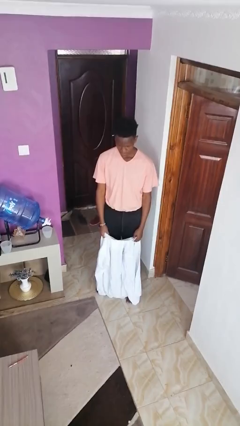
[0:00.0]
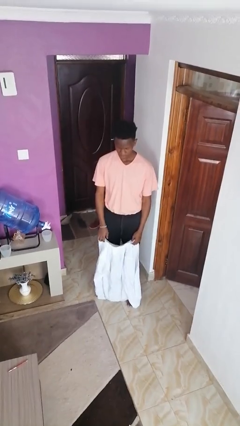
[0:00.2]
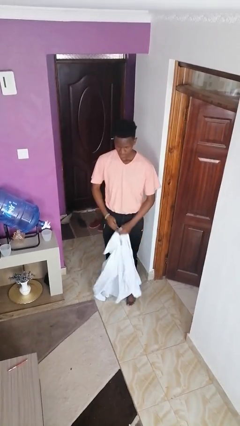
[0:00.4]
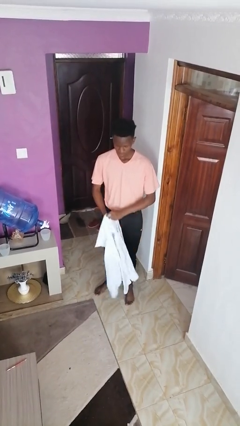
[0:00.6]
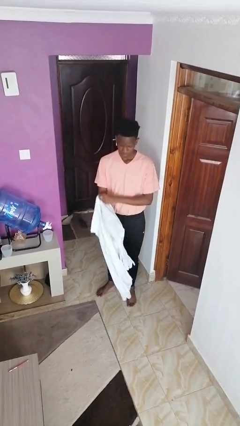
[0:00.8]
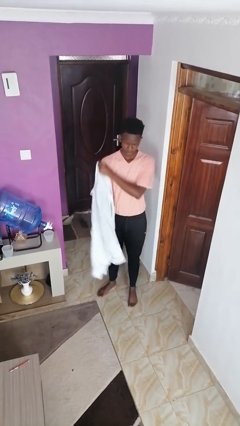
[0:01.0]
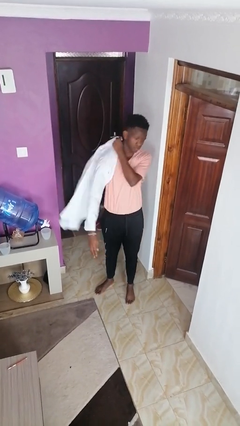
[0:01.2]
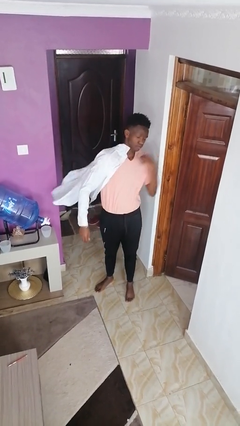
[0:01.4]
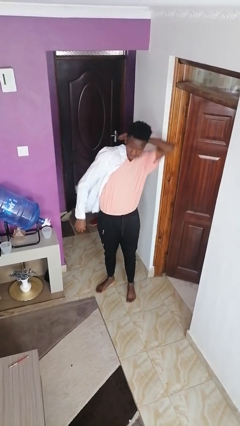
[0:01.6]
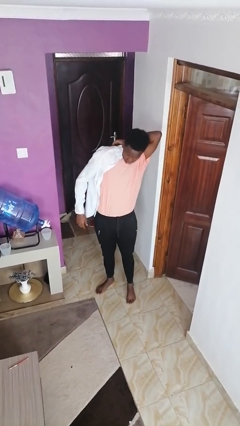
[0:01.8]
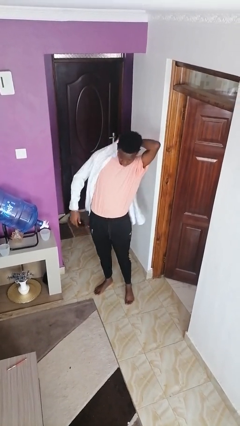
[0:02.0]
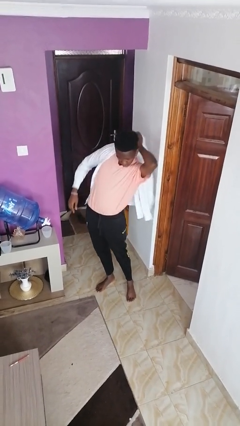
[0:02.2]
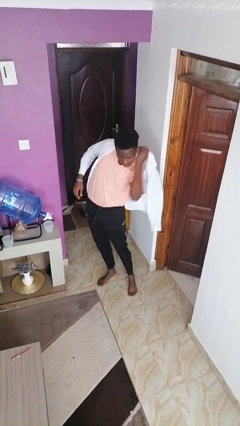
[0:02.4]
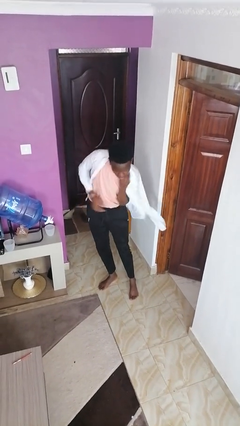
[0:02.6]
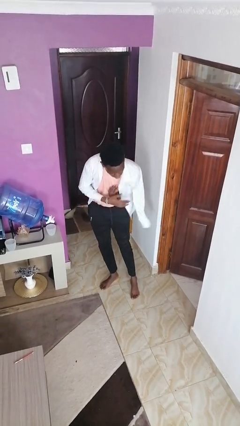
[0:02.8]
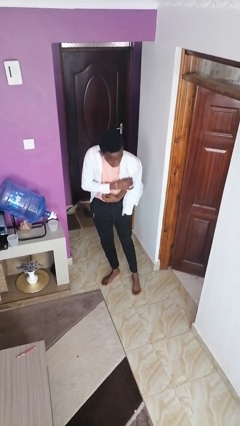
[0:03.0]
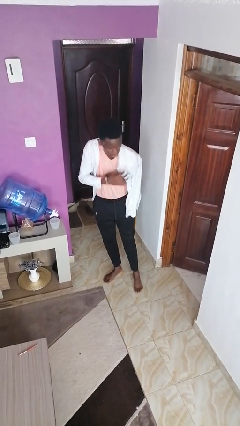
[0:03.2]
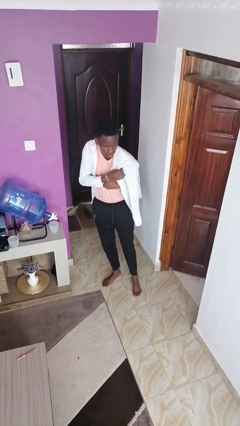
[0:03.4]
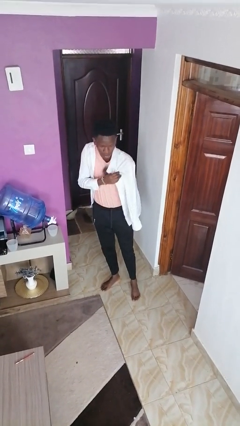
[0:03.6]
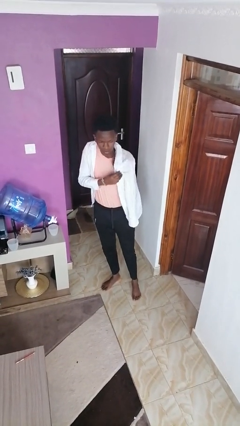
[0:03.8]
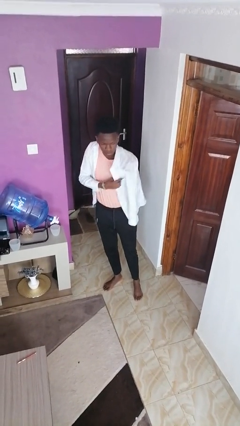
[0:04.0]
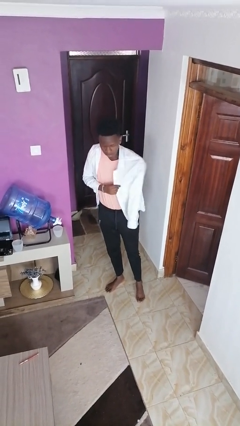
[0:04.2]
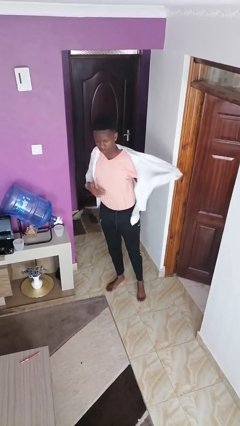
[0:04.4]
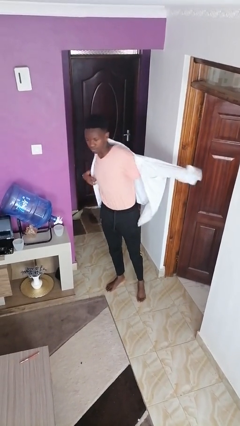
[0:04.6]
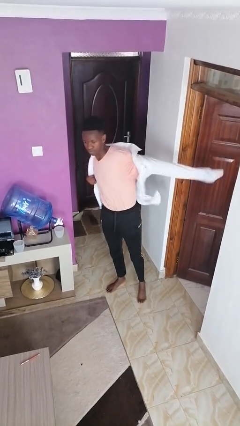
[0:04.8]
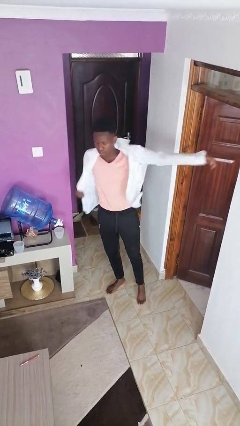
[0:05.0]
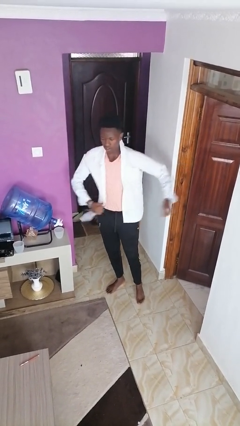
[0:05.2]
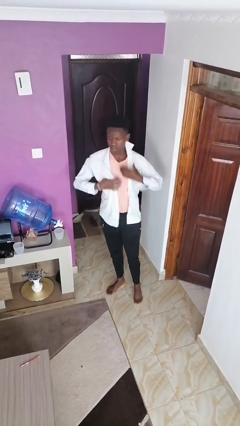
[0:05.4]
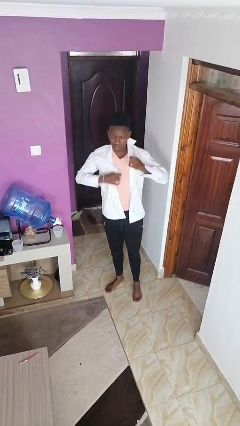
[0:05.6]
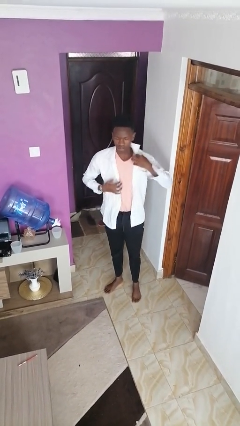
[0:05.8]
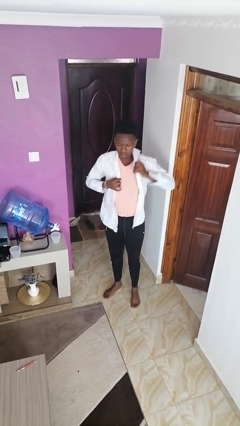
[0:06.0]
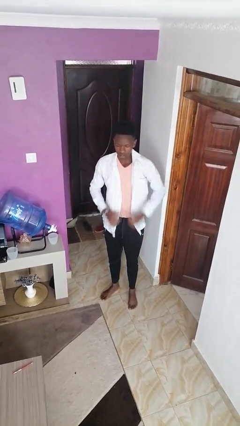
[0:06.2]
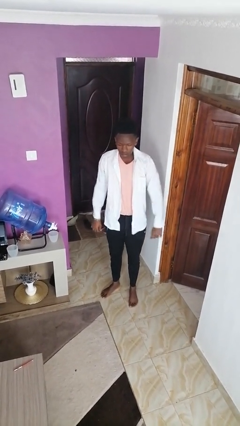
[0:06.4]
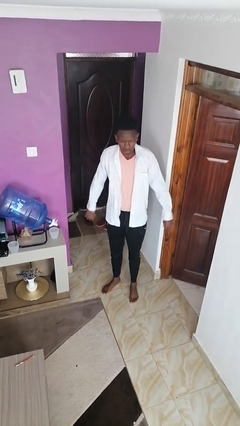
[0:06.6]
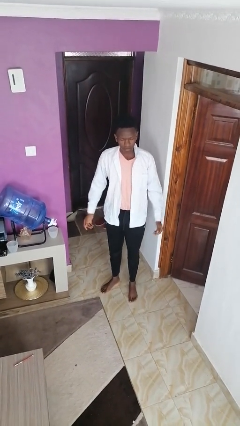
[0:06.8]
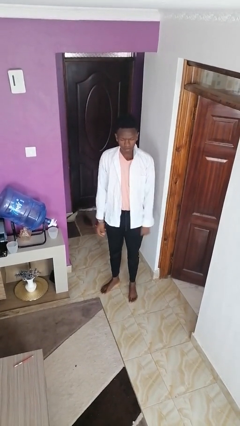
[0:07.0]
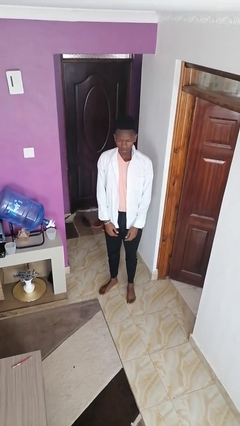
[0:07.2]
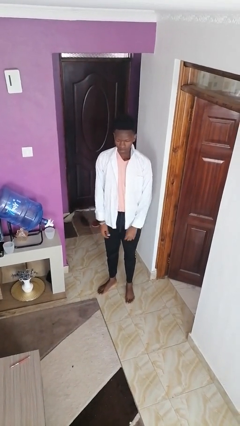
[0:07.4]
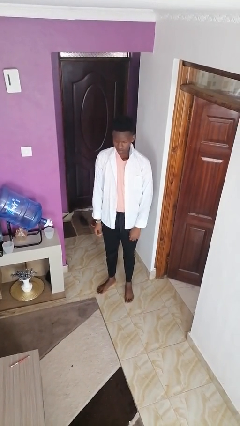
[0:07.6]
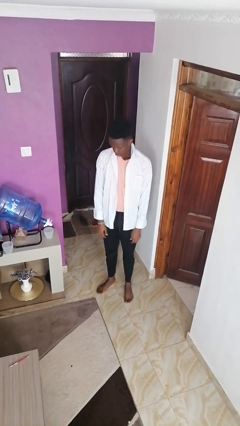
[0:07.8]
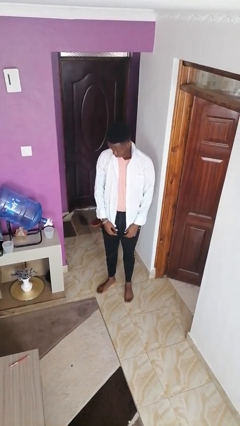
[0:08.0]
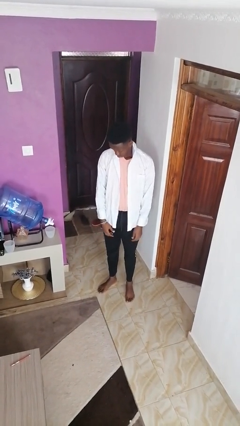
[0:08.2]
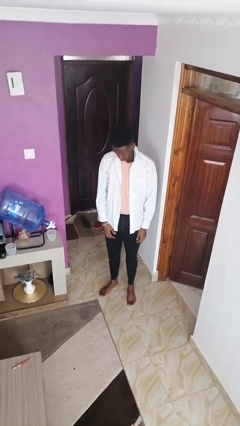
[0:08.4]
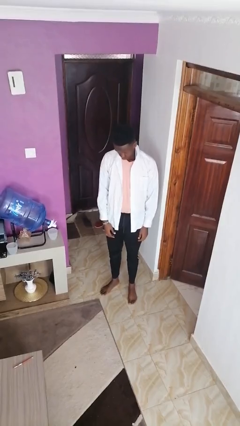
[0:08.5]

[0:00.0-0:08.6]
person puts on shirt

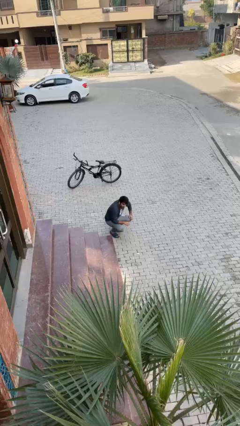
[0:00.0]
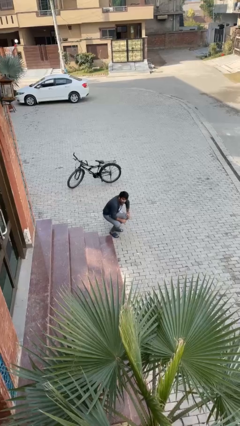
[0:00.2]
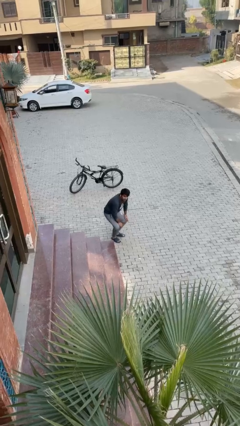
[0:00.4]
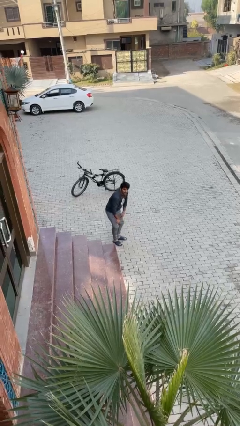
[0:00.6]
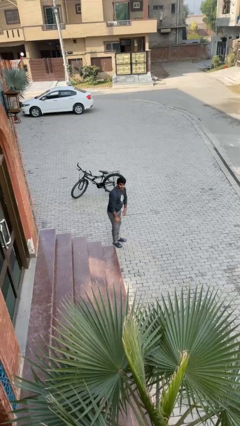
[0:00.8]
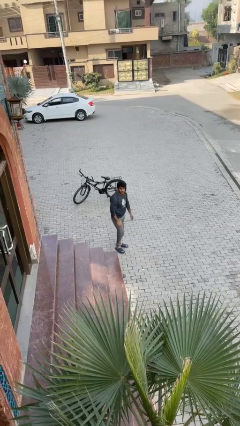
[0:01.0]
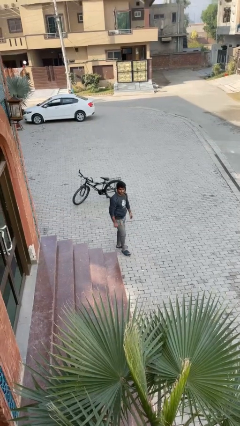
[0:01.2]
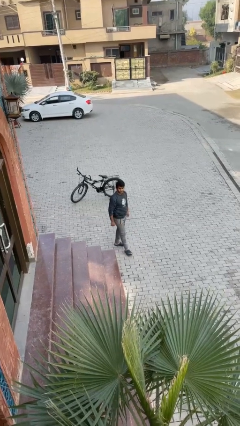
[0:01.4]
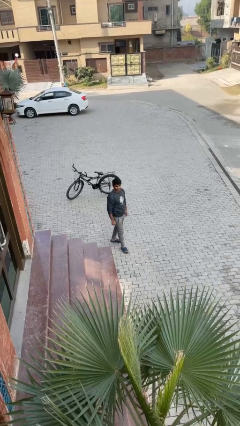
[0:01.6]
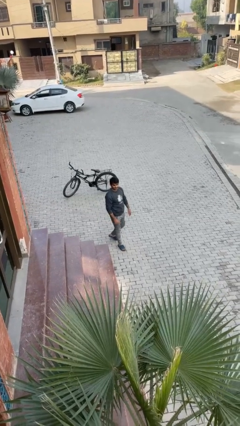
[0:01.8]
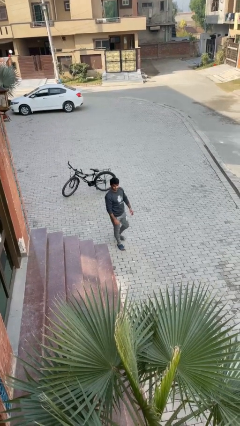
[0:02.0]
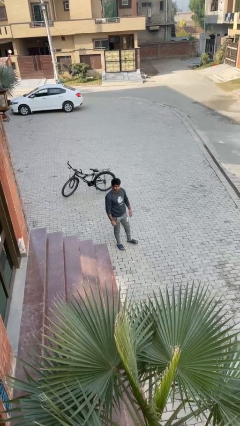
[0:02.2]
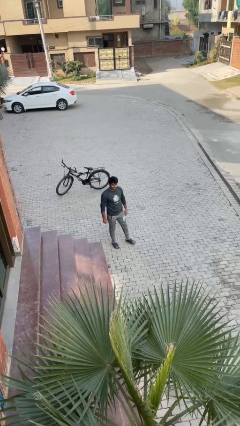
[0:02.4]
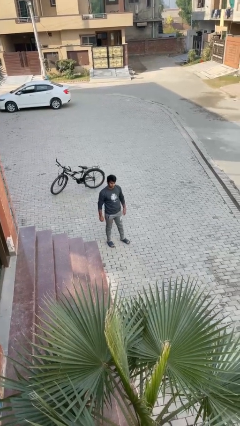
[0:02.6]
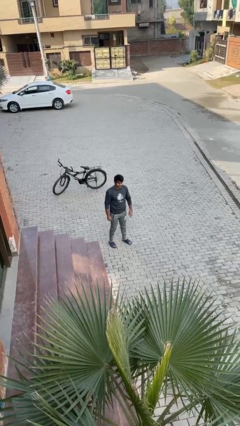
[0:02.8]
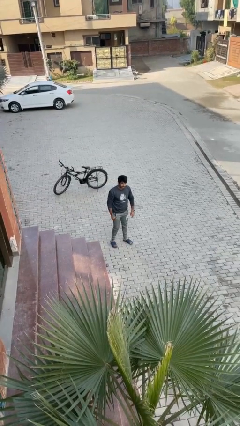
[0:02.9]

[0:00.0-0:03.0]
person stands up

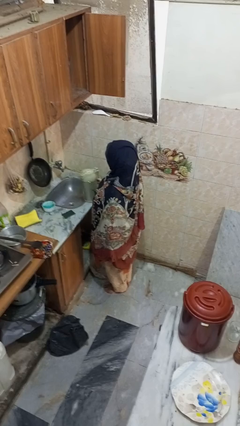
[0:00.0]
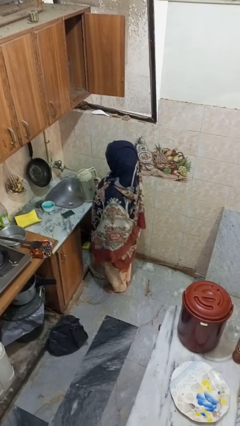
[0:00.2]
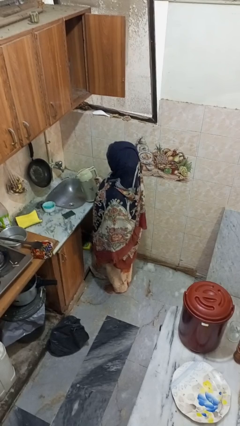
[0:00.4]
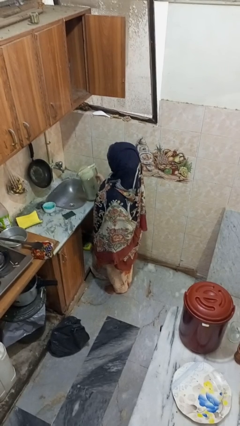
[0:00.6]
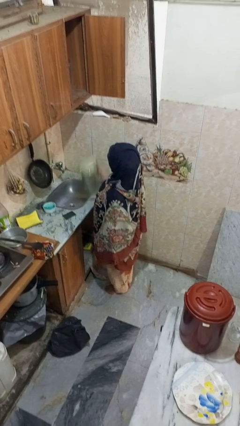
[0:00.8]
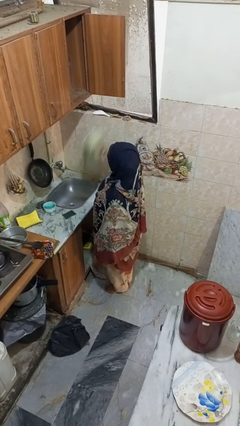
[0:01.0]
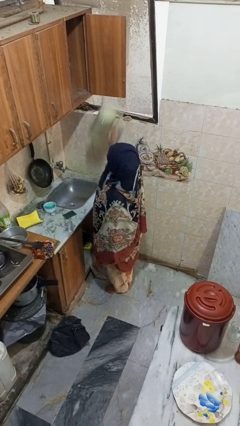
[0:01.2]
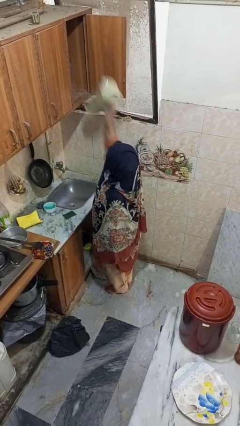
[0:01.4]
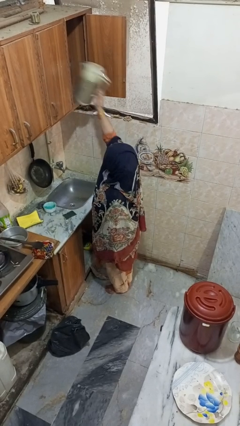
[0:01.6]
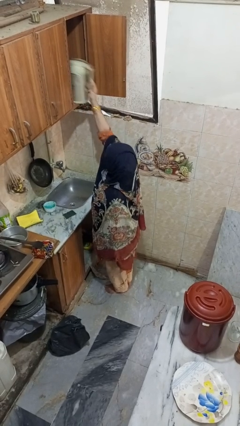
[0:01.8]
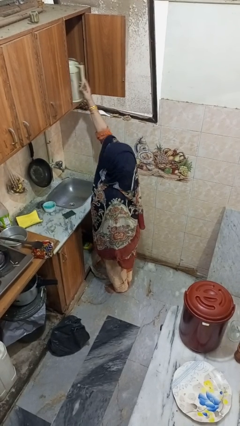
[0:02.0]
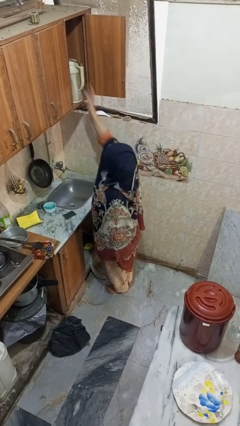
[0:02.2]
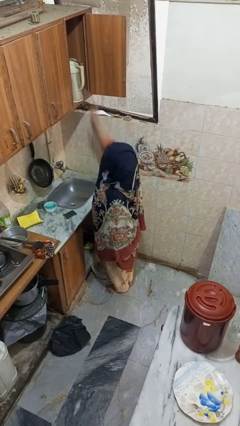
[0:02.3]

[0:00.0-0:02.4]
person takes object from cabinet

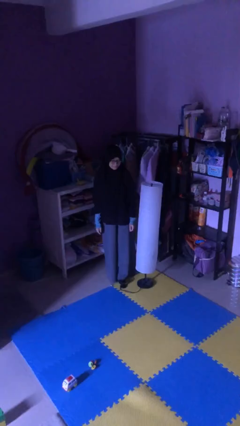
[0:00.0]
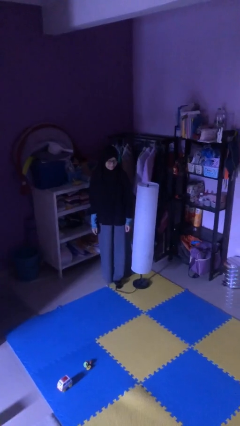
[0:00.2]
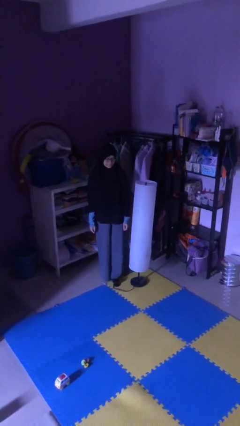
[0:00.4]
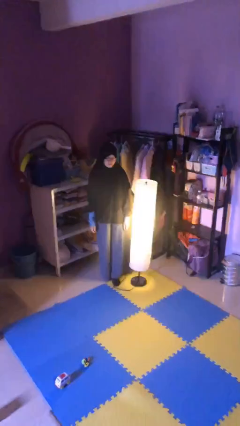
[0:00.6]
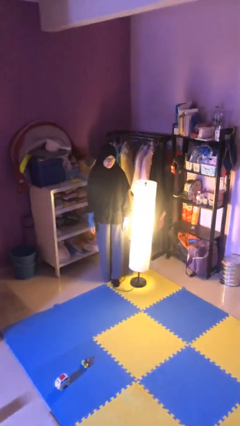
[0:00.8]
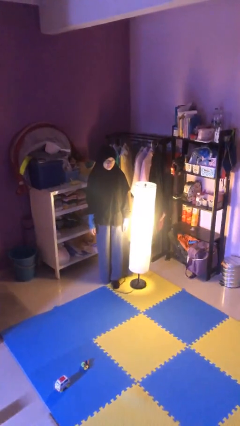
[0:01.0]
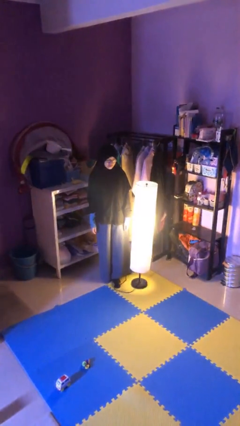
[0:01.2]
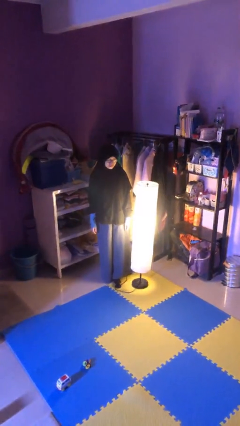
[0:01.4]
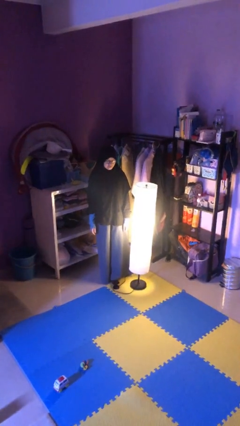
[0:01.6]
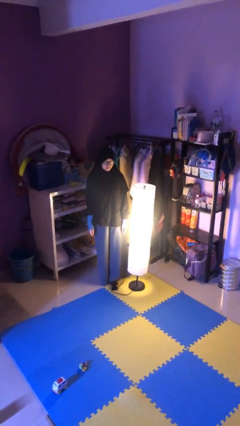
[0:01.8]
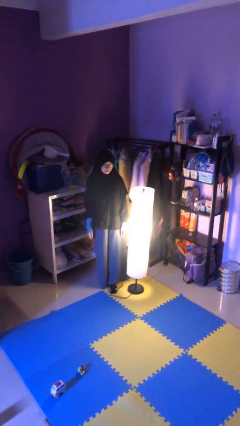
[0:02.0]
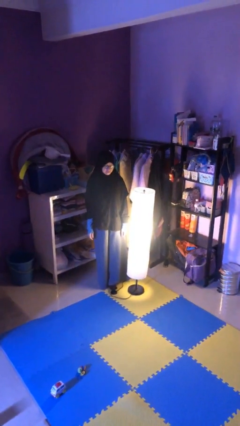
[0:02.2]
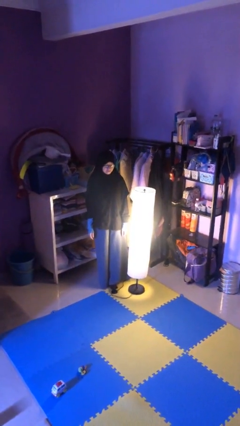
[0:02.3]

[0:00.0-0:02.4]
person turns on lamp

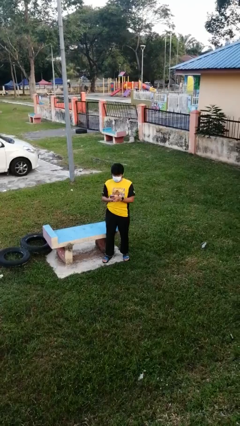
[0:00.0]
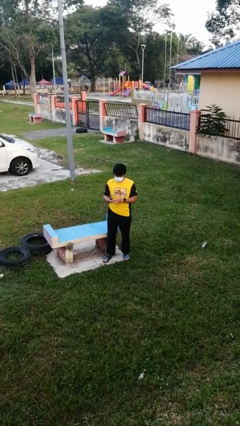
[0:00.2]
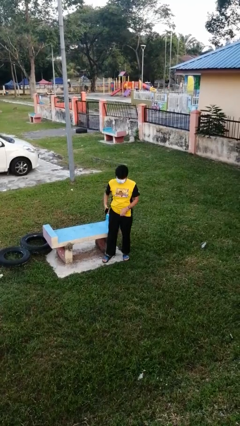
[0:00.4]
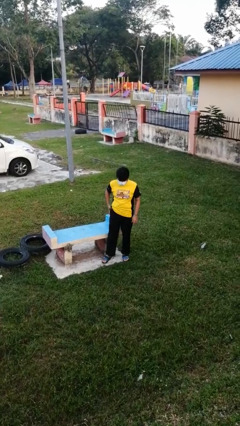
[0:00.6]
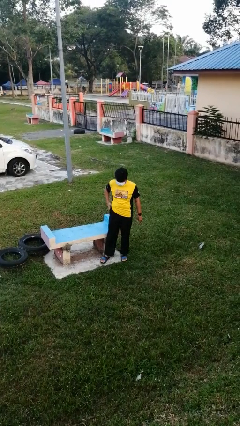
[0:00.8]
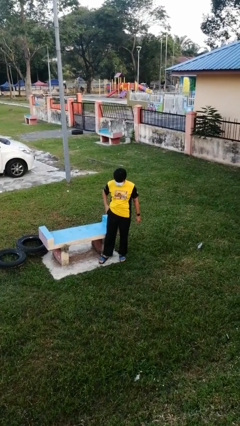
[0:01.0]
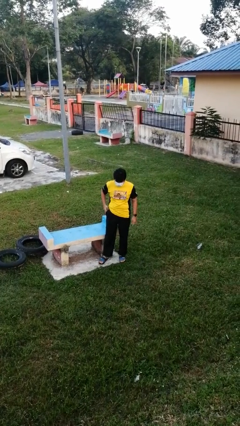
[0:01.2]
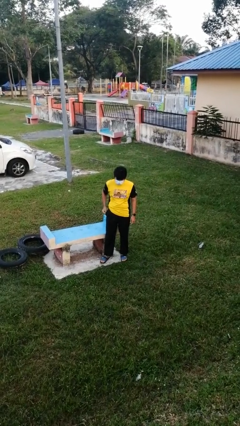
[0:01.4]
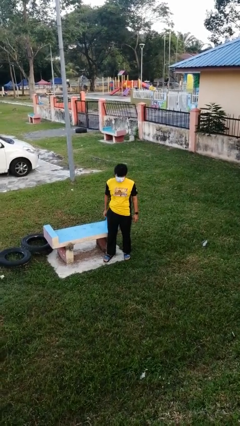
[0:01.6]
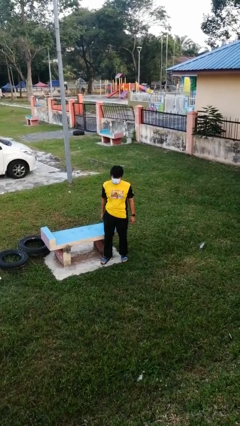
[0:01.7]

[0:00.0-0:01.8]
person puts phone into pocket
